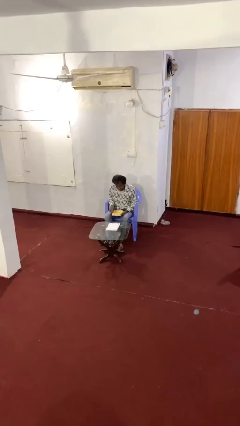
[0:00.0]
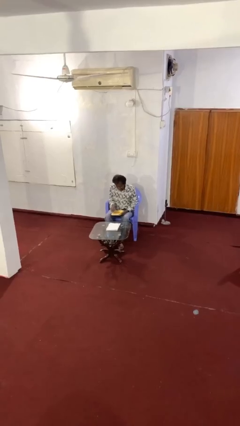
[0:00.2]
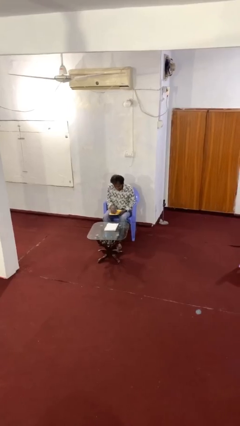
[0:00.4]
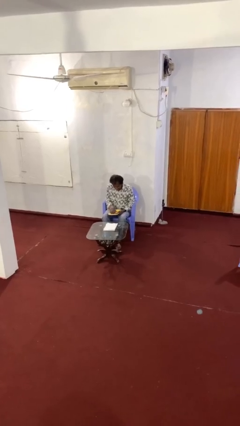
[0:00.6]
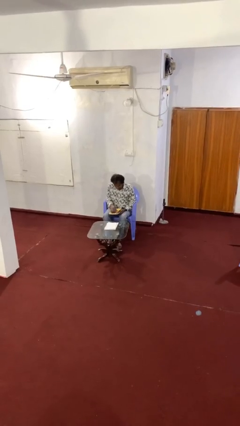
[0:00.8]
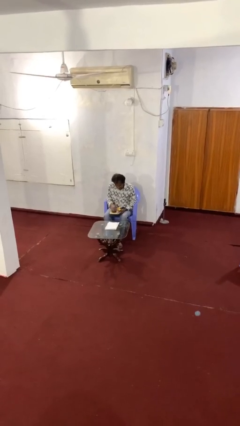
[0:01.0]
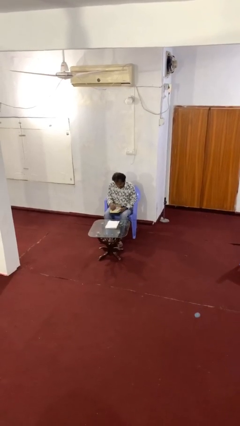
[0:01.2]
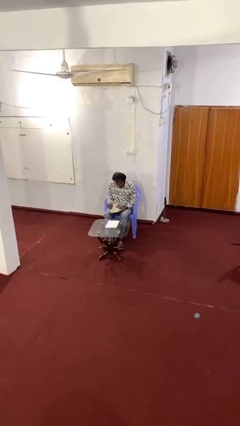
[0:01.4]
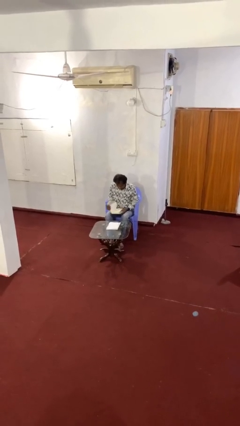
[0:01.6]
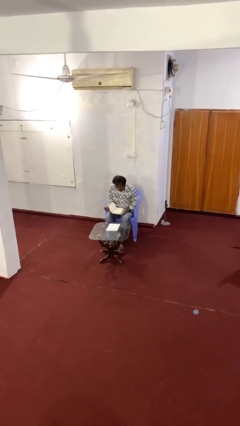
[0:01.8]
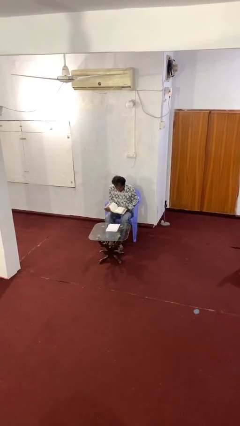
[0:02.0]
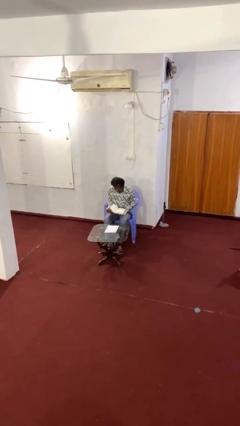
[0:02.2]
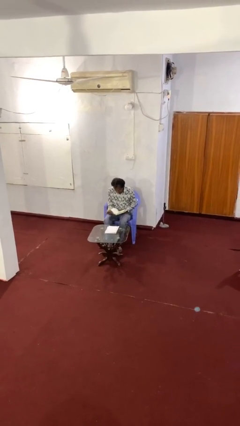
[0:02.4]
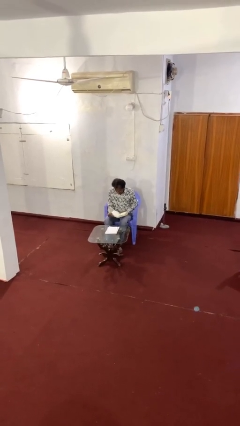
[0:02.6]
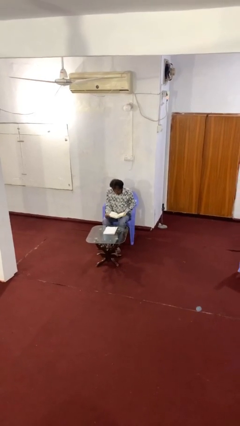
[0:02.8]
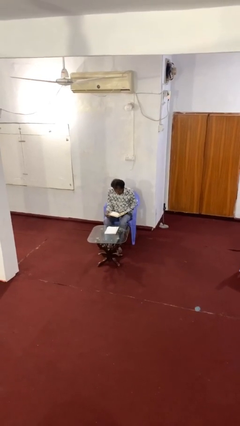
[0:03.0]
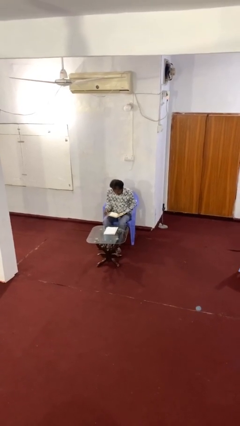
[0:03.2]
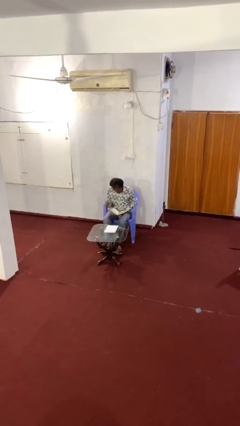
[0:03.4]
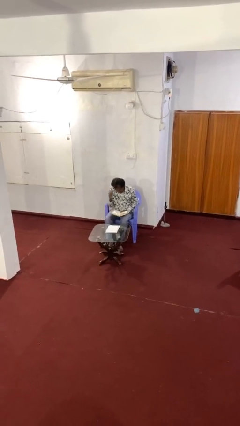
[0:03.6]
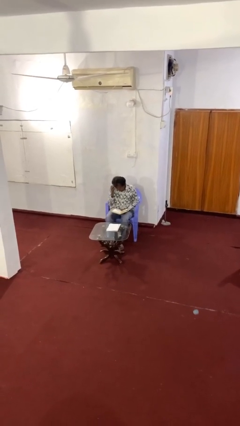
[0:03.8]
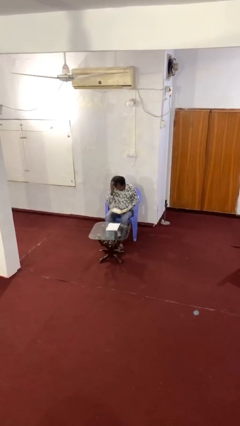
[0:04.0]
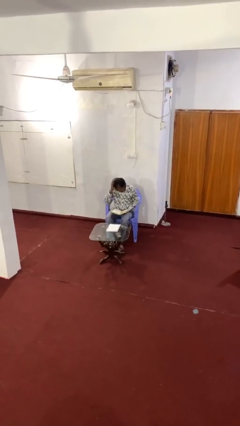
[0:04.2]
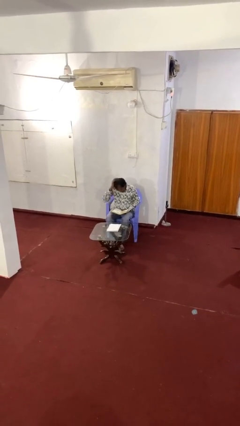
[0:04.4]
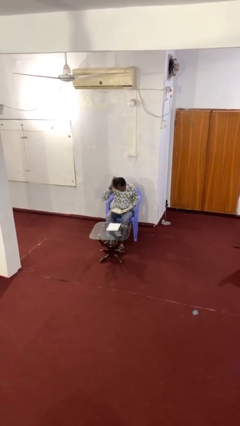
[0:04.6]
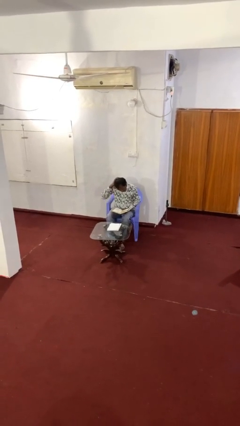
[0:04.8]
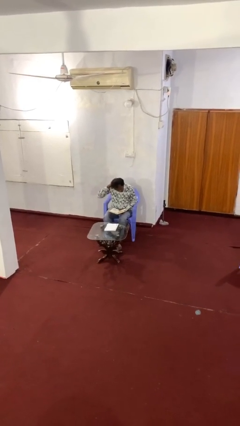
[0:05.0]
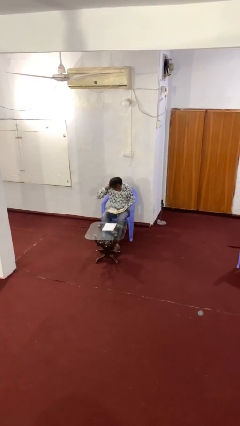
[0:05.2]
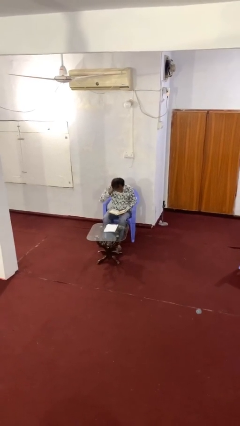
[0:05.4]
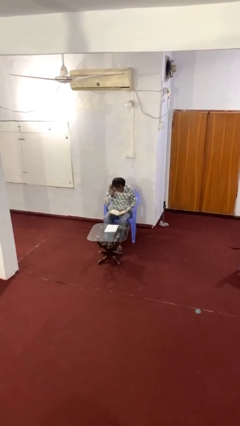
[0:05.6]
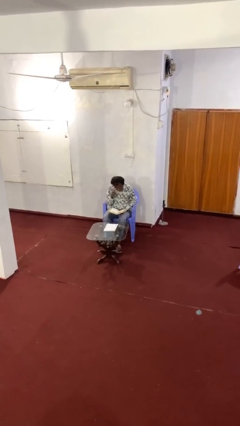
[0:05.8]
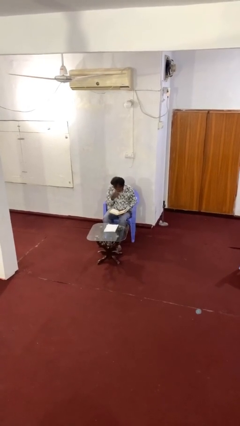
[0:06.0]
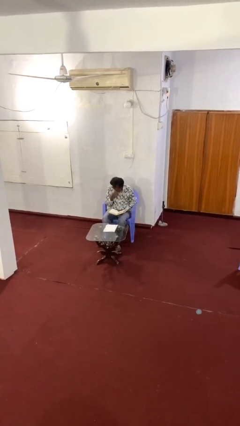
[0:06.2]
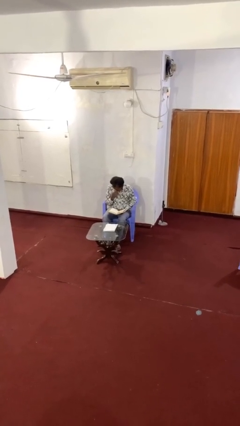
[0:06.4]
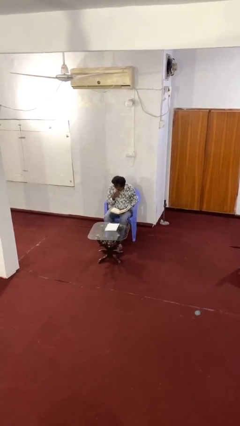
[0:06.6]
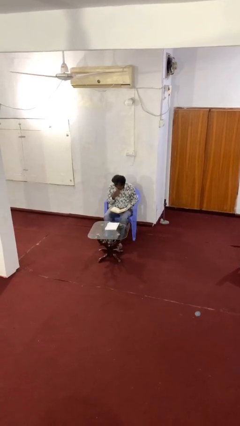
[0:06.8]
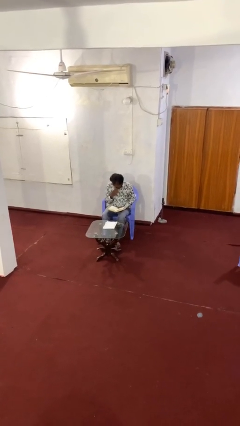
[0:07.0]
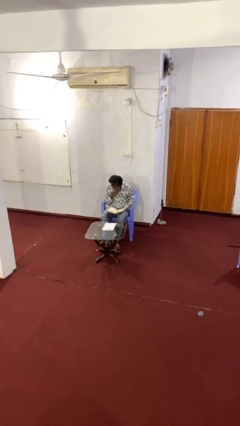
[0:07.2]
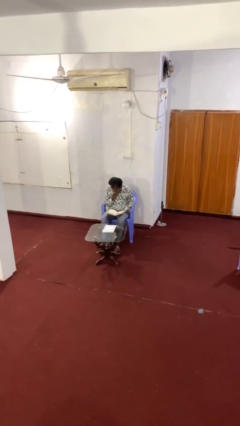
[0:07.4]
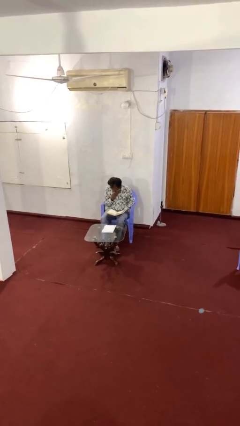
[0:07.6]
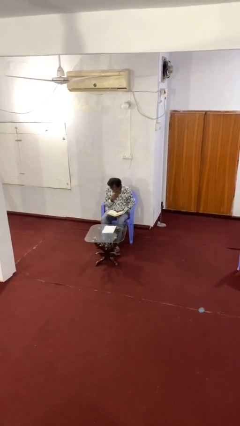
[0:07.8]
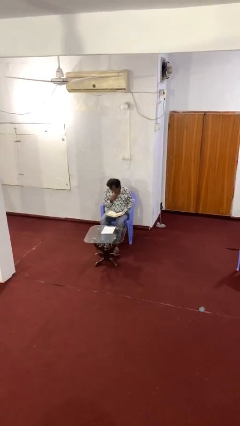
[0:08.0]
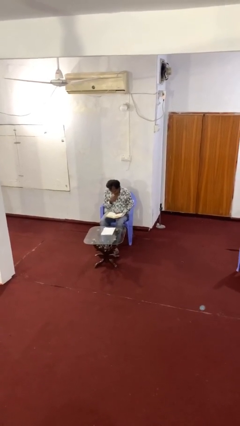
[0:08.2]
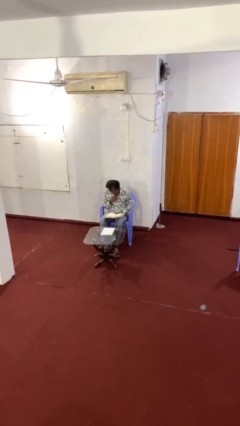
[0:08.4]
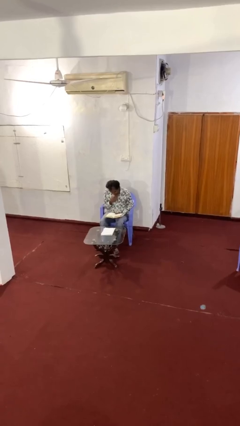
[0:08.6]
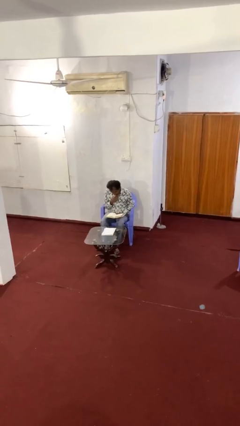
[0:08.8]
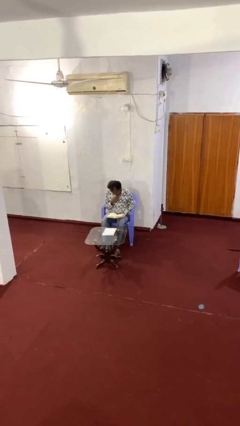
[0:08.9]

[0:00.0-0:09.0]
person reads document

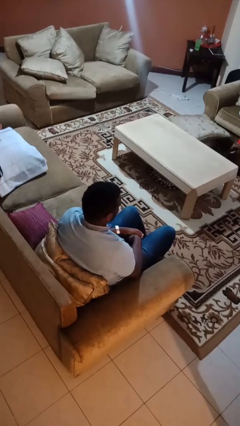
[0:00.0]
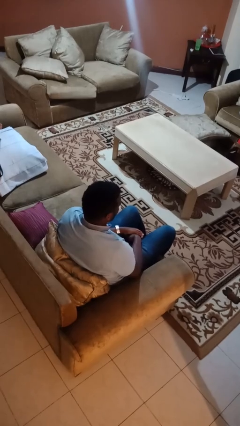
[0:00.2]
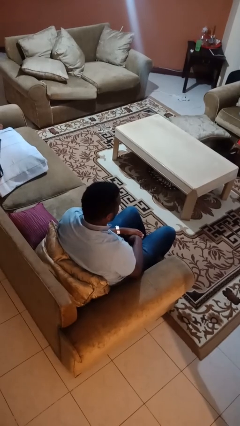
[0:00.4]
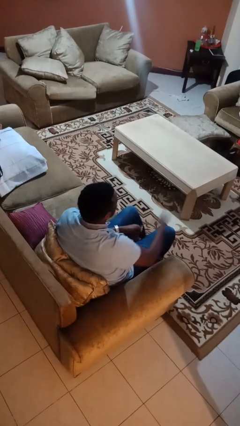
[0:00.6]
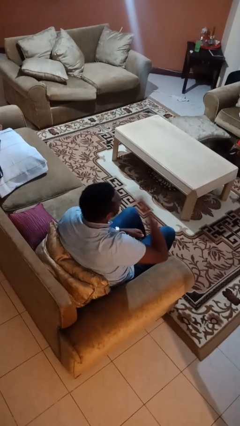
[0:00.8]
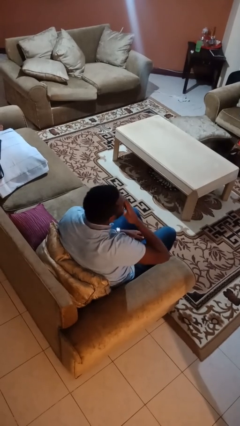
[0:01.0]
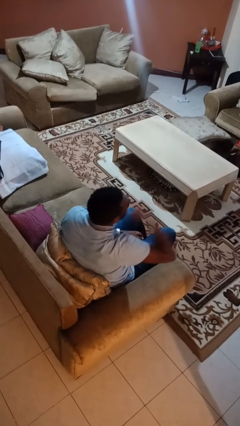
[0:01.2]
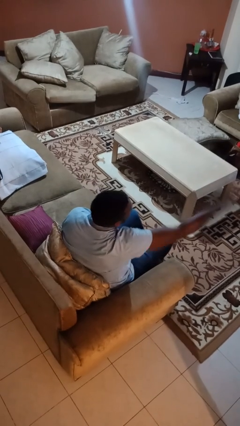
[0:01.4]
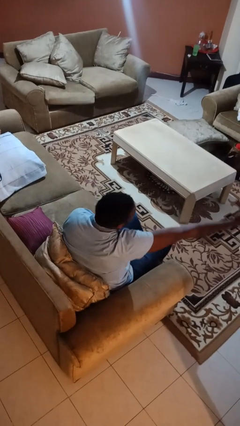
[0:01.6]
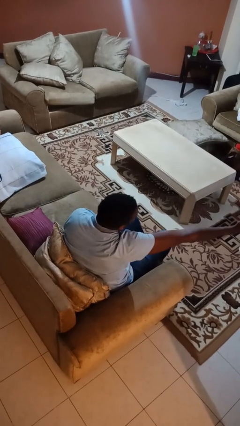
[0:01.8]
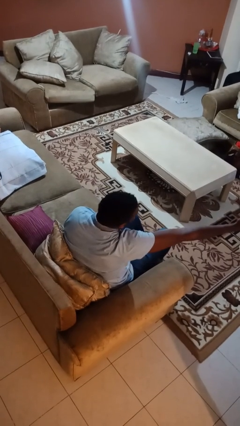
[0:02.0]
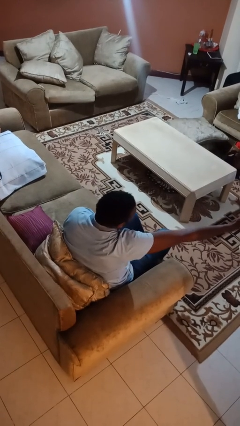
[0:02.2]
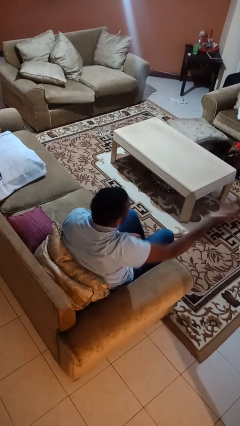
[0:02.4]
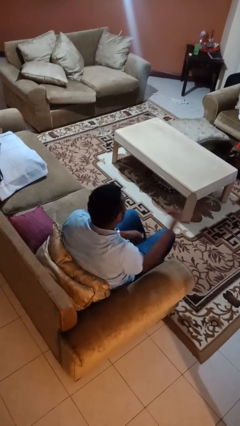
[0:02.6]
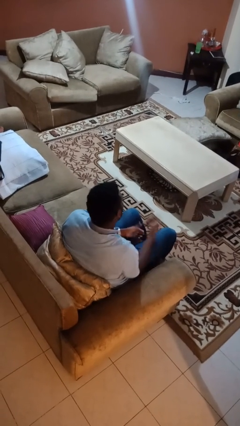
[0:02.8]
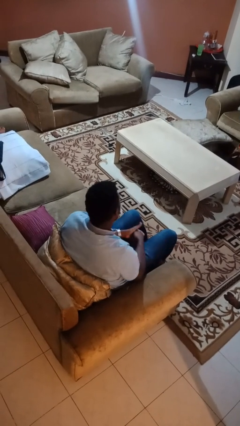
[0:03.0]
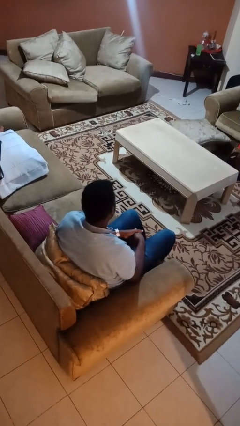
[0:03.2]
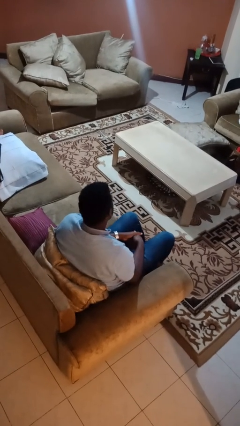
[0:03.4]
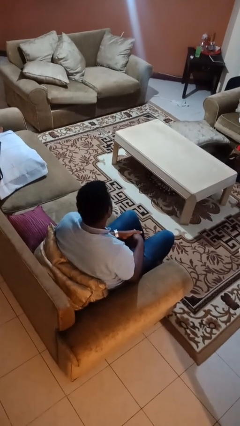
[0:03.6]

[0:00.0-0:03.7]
person gestures blow kiss

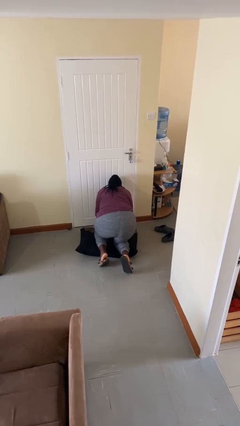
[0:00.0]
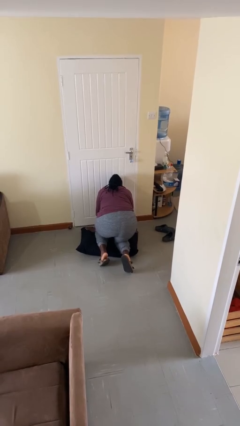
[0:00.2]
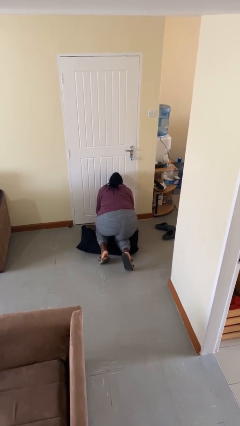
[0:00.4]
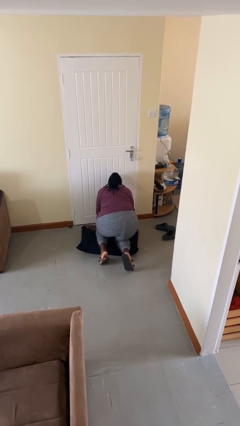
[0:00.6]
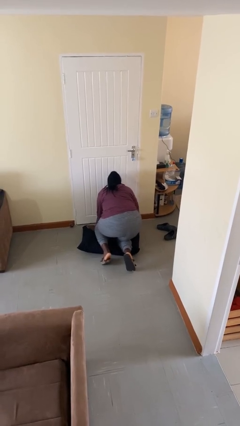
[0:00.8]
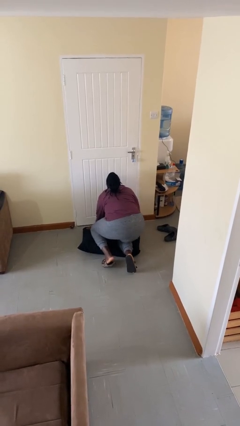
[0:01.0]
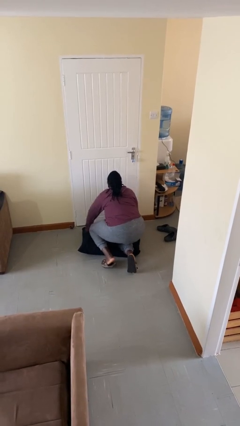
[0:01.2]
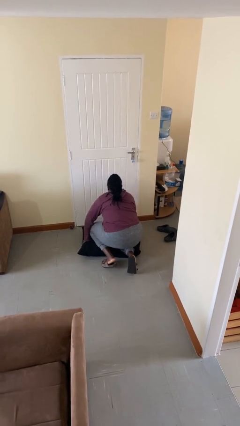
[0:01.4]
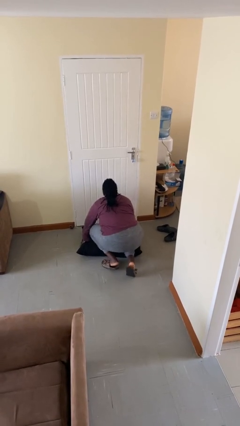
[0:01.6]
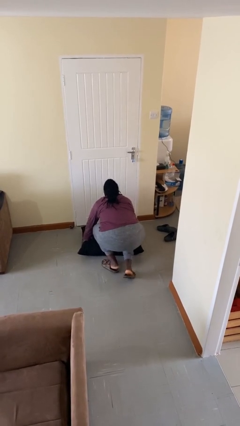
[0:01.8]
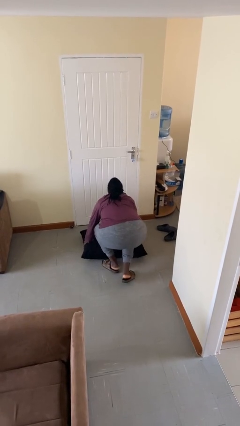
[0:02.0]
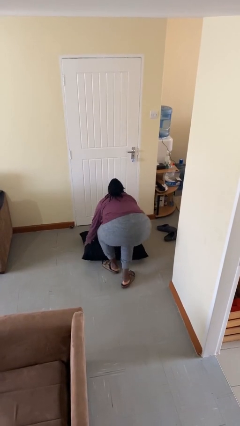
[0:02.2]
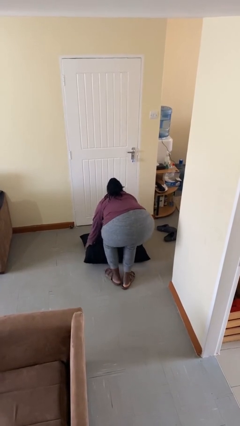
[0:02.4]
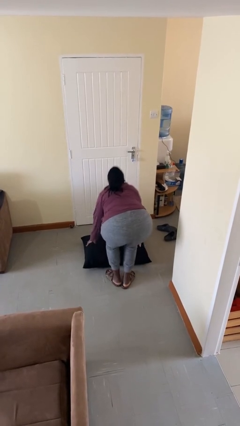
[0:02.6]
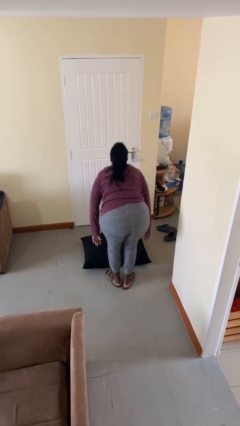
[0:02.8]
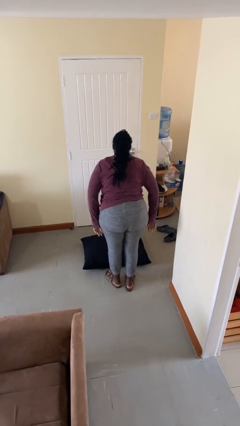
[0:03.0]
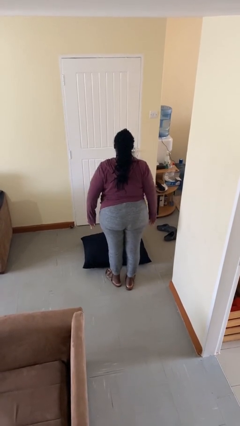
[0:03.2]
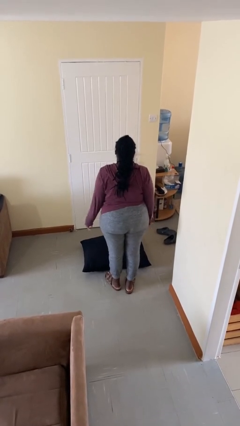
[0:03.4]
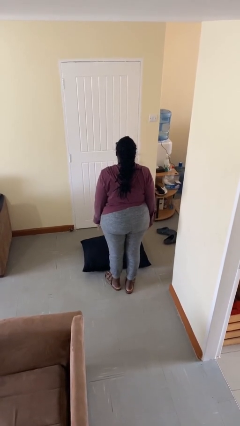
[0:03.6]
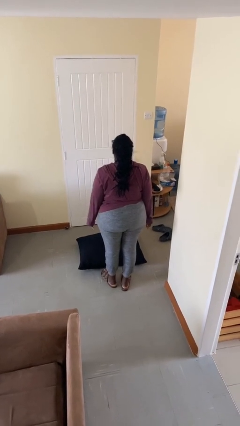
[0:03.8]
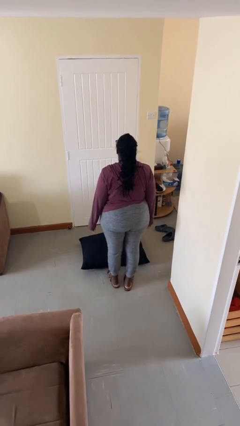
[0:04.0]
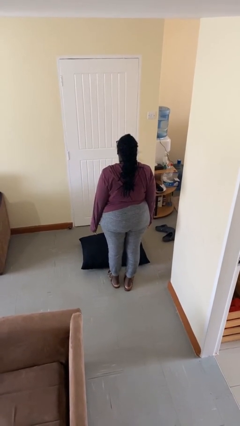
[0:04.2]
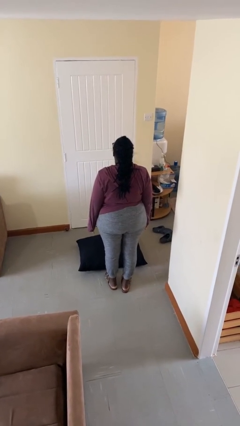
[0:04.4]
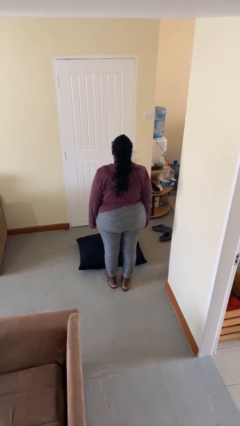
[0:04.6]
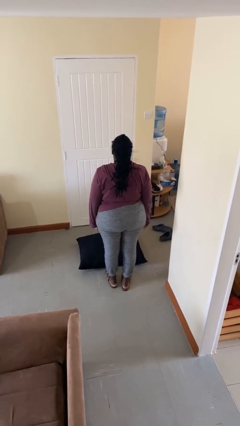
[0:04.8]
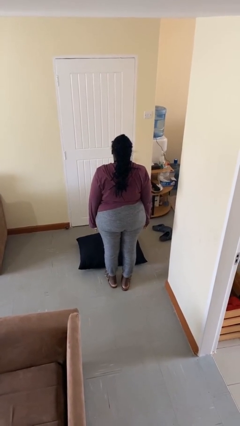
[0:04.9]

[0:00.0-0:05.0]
person stands up from floor
